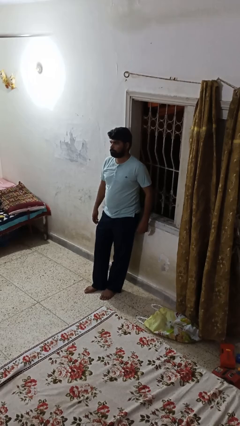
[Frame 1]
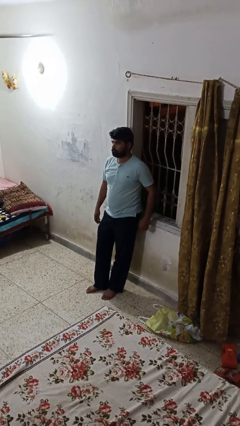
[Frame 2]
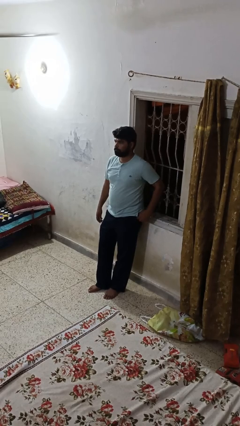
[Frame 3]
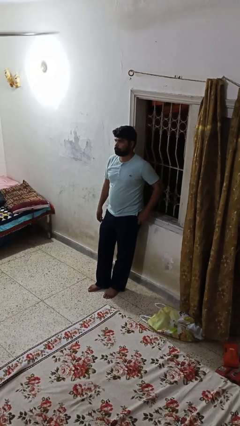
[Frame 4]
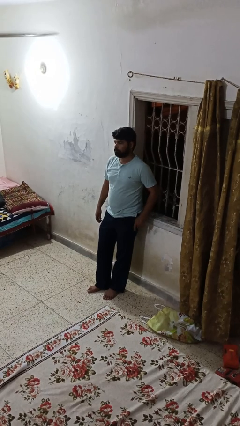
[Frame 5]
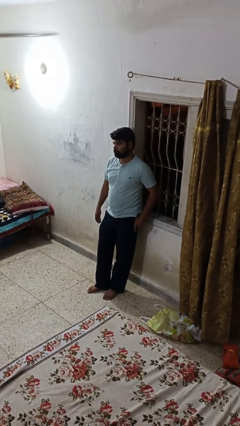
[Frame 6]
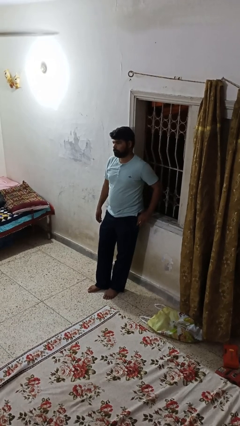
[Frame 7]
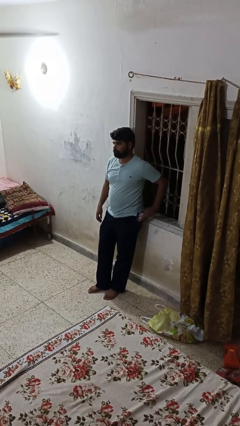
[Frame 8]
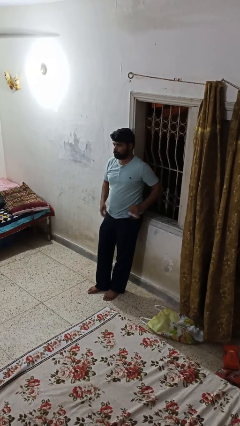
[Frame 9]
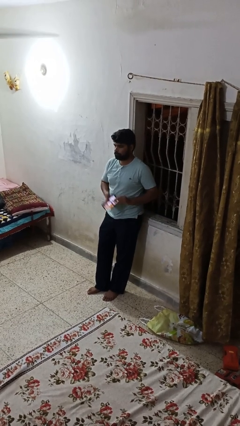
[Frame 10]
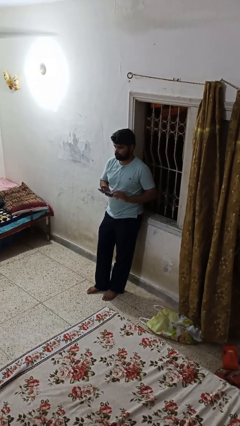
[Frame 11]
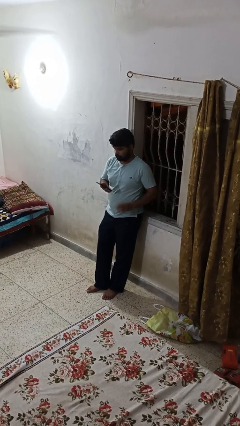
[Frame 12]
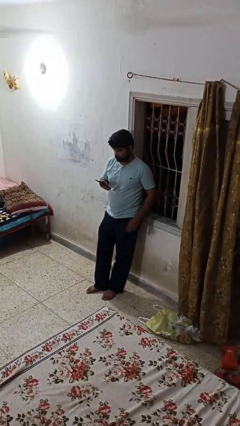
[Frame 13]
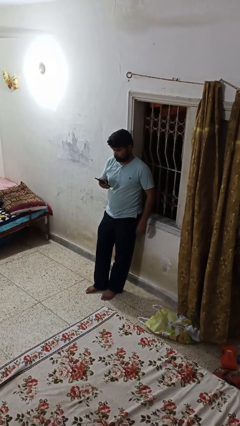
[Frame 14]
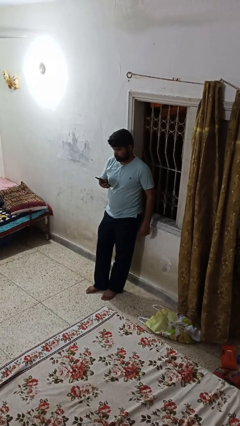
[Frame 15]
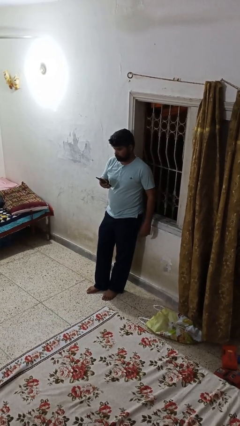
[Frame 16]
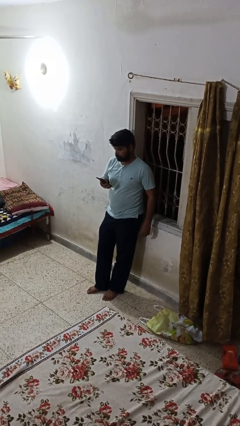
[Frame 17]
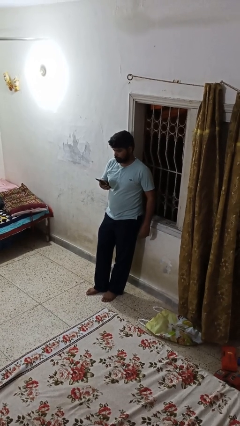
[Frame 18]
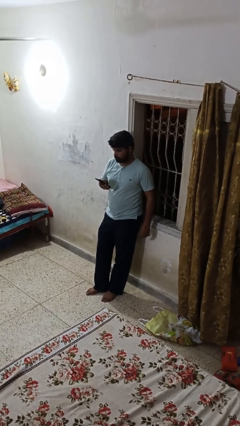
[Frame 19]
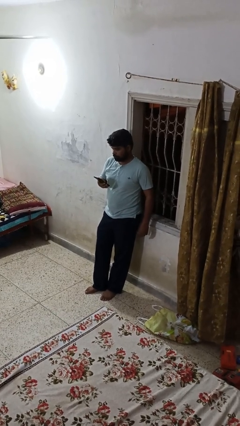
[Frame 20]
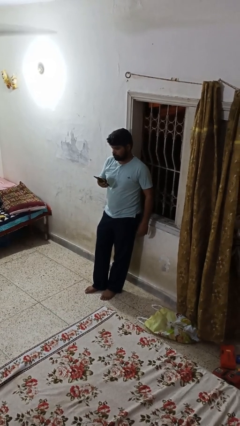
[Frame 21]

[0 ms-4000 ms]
person takes phone from pocket

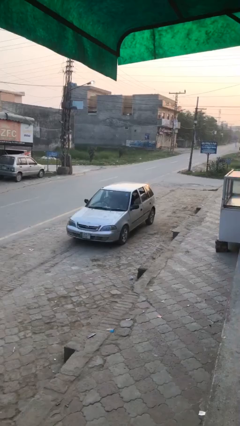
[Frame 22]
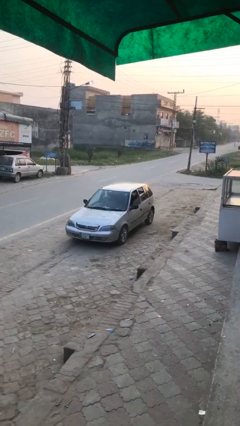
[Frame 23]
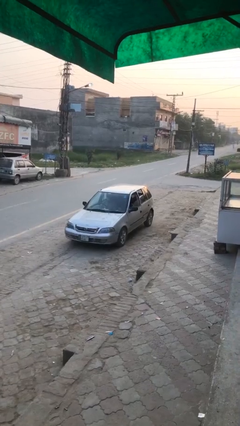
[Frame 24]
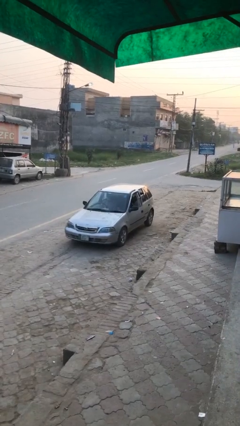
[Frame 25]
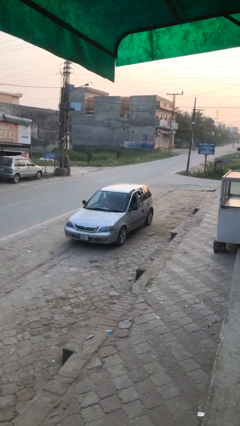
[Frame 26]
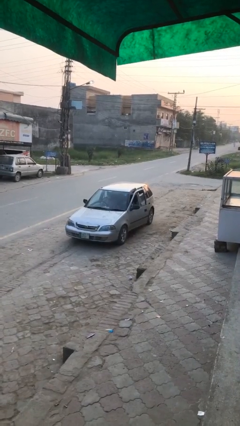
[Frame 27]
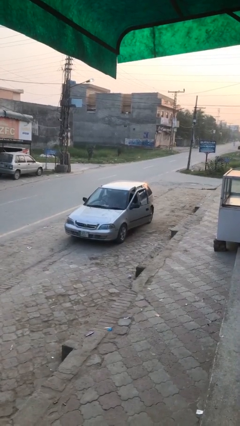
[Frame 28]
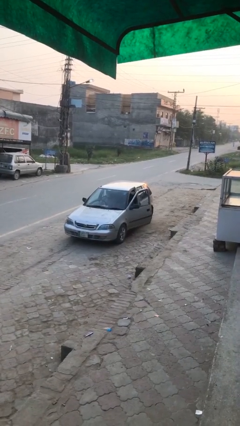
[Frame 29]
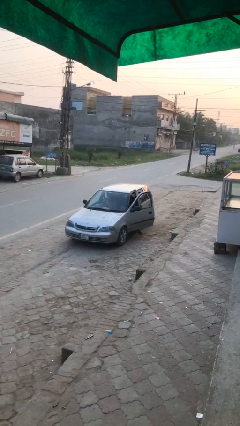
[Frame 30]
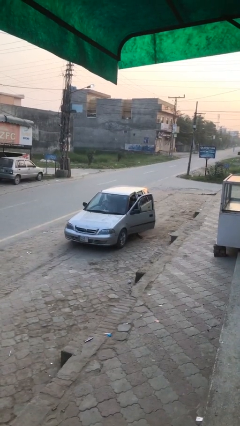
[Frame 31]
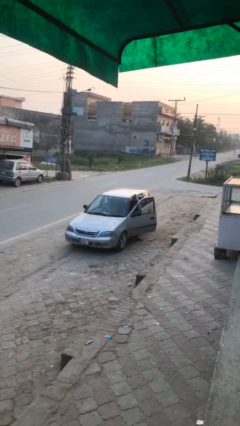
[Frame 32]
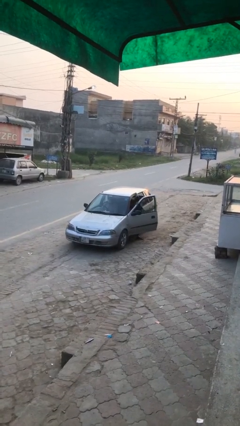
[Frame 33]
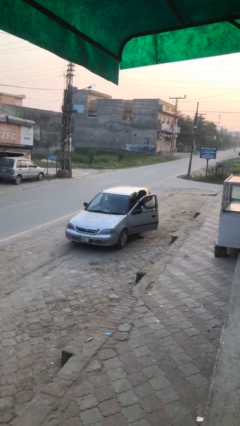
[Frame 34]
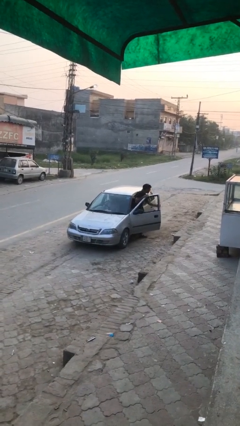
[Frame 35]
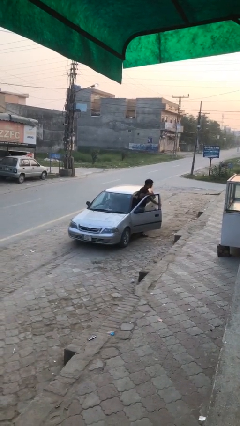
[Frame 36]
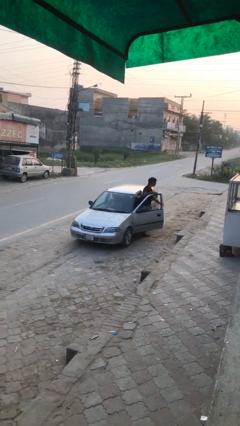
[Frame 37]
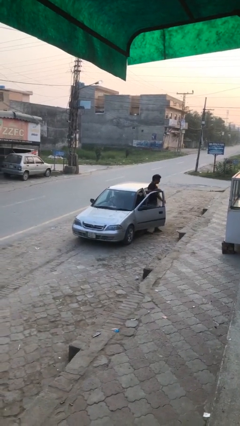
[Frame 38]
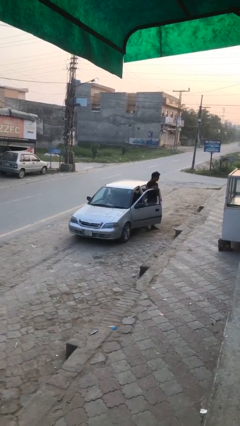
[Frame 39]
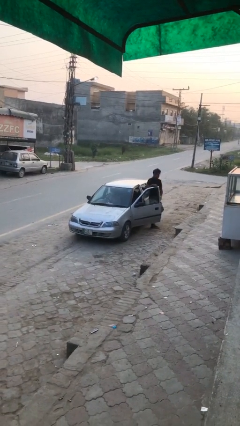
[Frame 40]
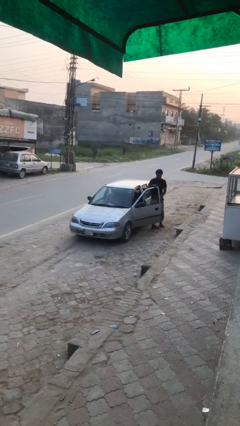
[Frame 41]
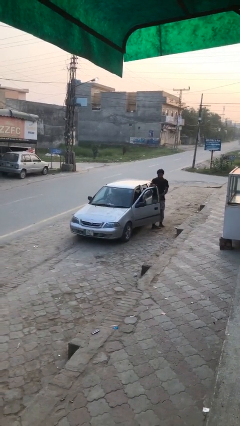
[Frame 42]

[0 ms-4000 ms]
car drops off person

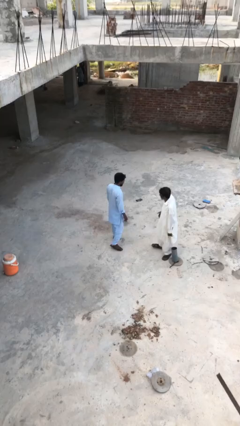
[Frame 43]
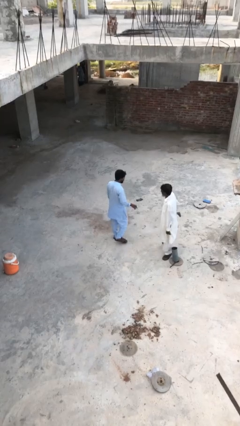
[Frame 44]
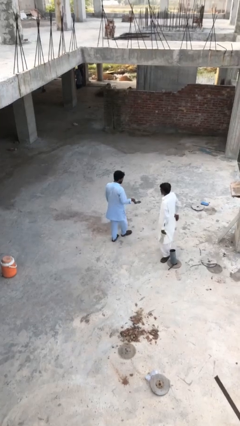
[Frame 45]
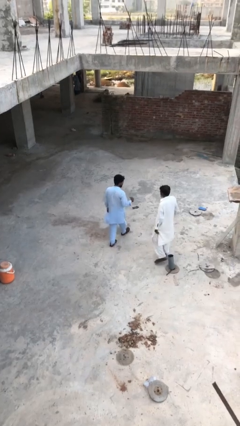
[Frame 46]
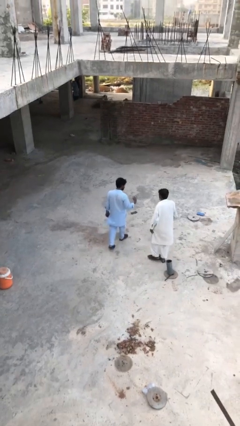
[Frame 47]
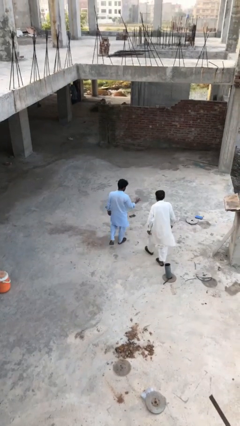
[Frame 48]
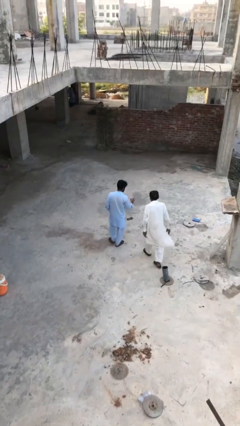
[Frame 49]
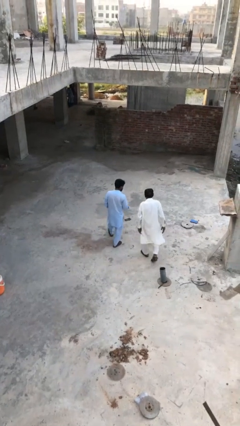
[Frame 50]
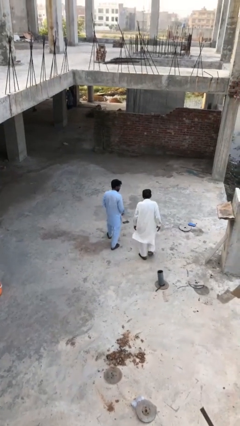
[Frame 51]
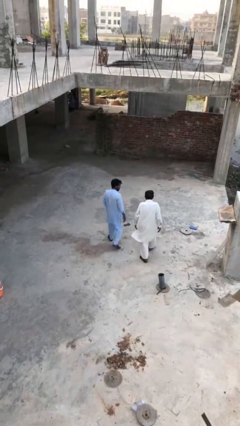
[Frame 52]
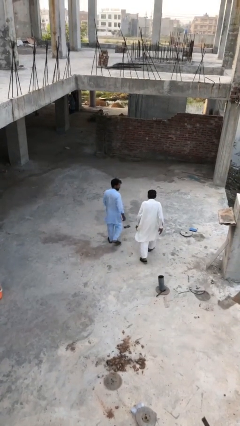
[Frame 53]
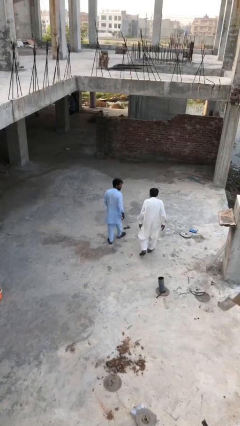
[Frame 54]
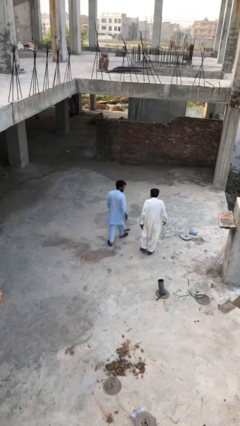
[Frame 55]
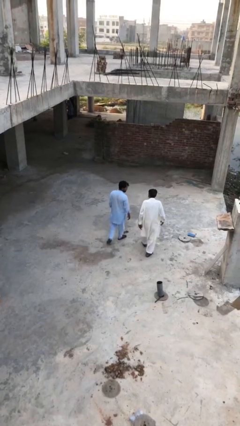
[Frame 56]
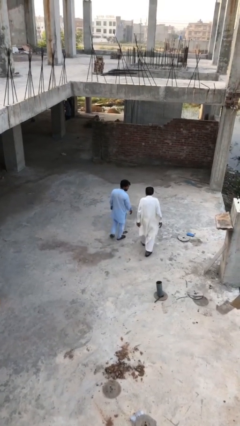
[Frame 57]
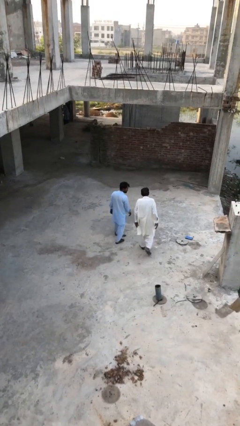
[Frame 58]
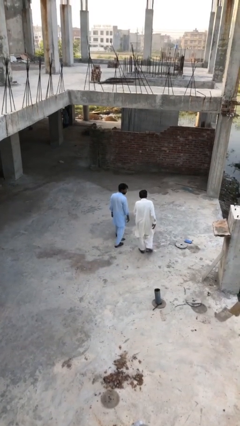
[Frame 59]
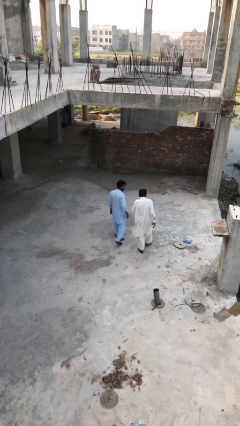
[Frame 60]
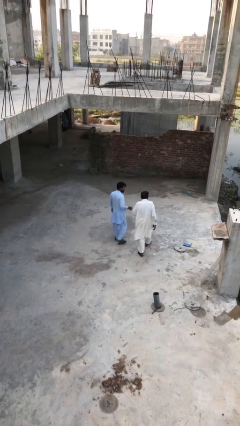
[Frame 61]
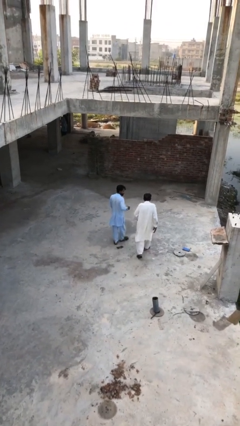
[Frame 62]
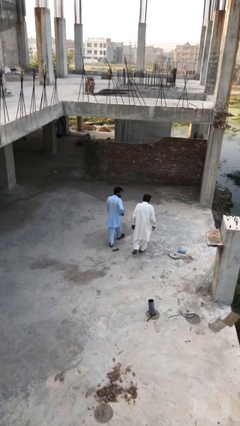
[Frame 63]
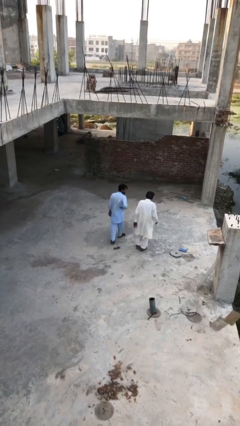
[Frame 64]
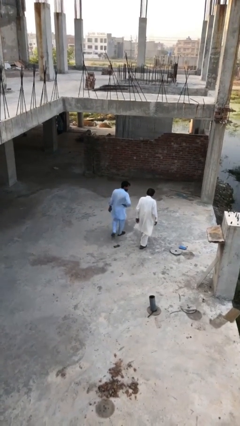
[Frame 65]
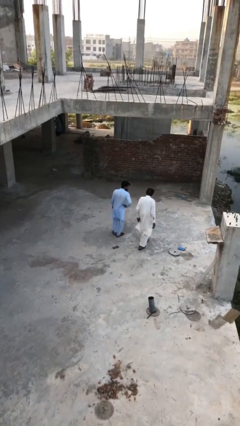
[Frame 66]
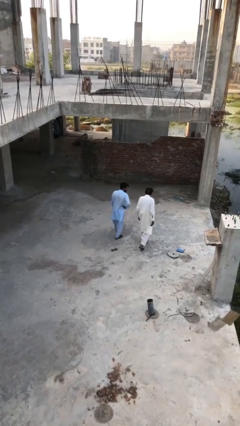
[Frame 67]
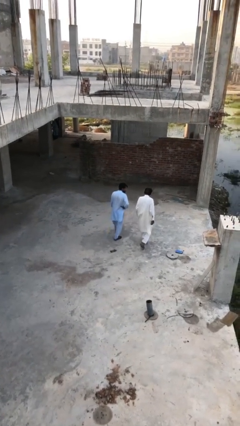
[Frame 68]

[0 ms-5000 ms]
person talks to person

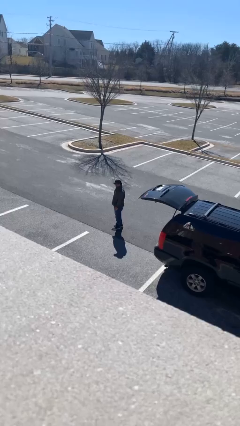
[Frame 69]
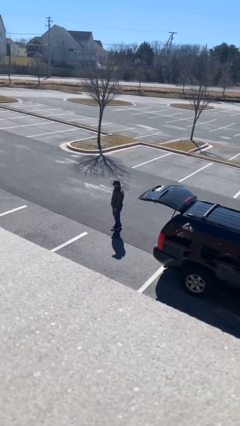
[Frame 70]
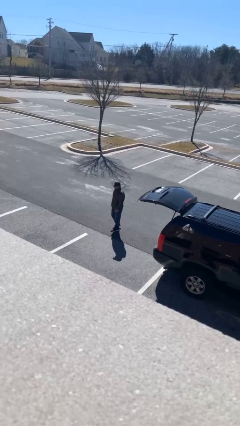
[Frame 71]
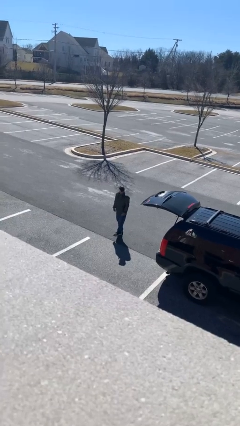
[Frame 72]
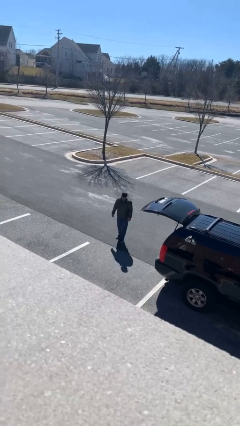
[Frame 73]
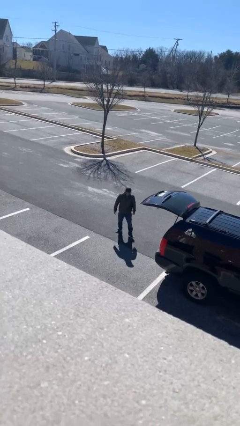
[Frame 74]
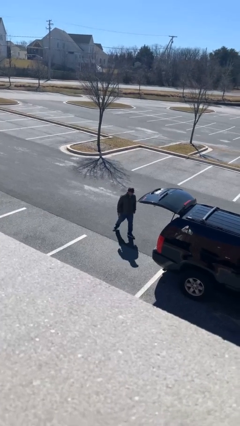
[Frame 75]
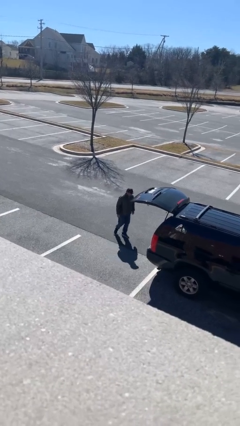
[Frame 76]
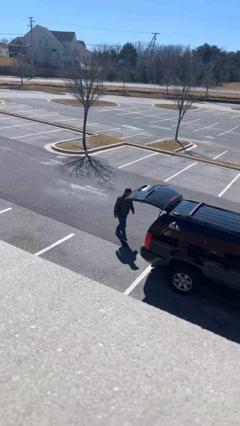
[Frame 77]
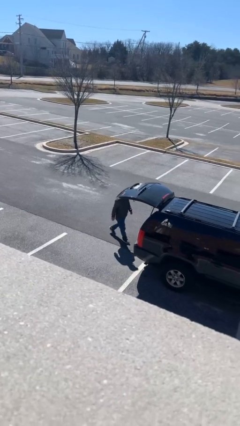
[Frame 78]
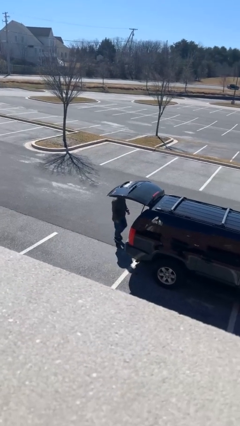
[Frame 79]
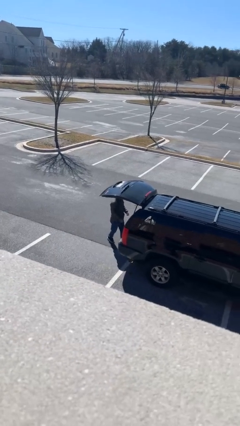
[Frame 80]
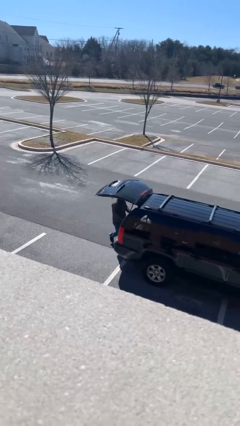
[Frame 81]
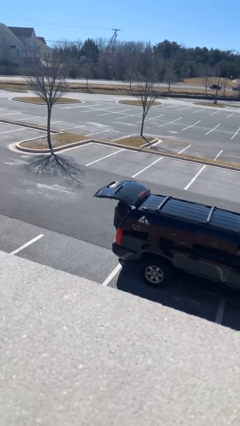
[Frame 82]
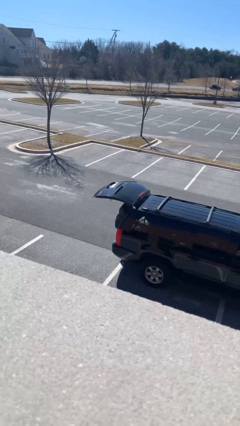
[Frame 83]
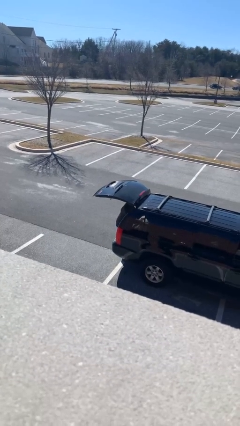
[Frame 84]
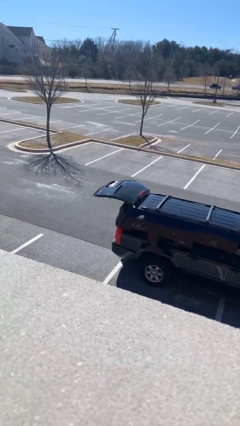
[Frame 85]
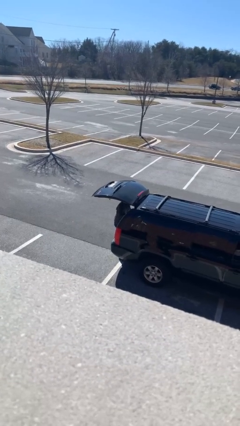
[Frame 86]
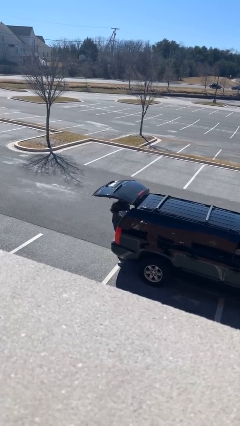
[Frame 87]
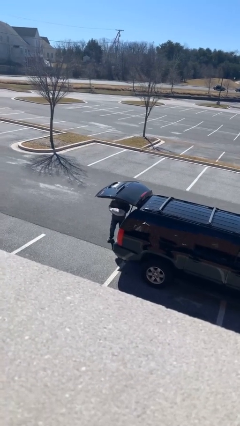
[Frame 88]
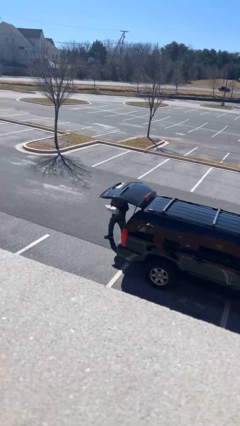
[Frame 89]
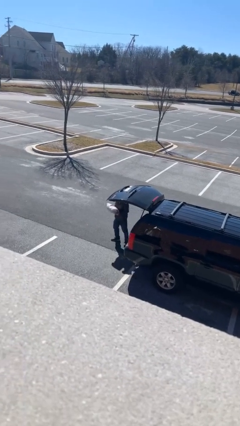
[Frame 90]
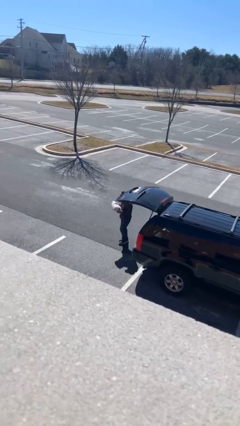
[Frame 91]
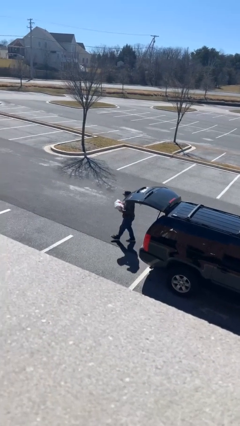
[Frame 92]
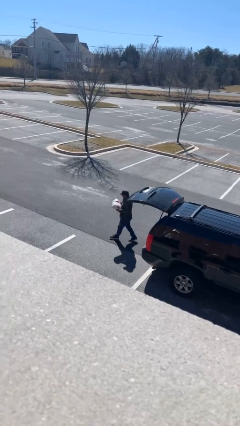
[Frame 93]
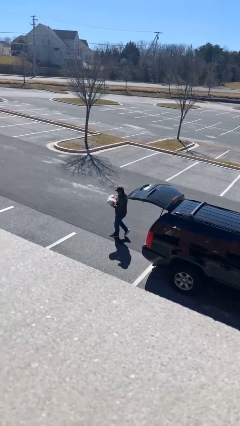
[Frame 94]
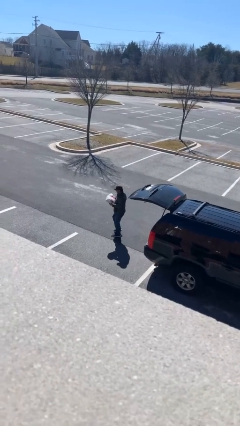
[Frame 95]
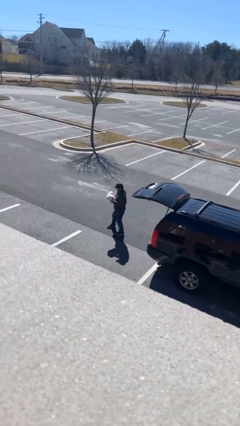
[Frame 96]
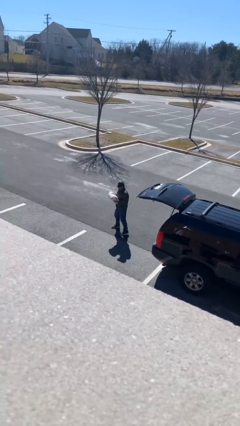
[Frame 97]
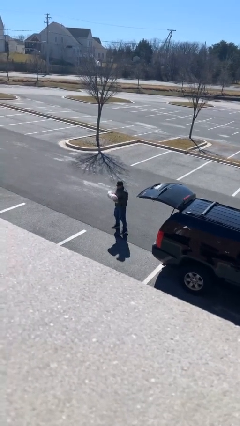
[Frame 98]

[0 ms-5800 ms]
person unloads car
